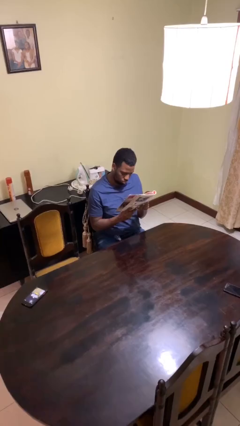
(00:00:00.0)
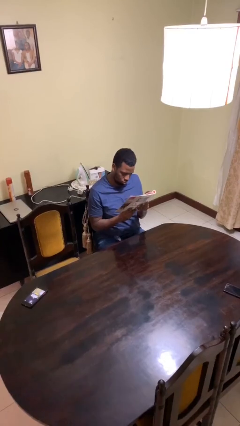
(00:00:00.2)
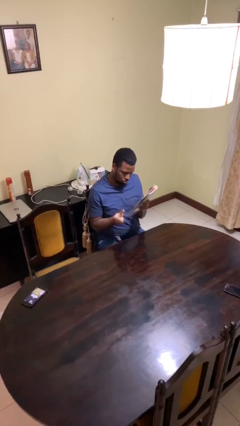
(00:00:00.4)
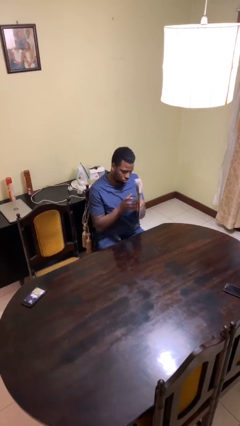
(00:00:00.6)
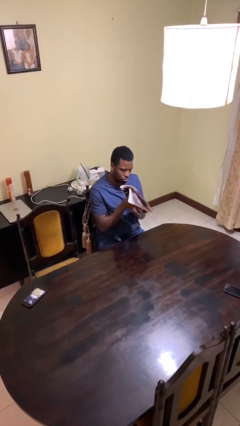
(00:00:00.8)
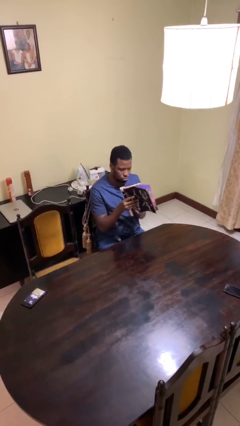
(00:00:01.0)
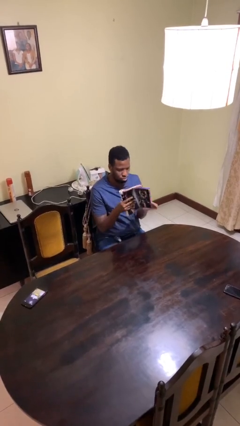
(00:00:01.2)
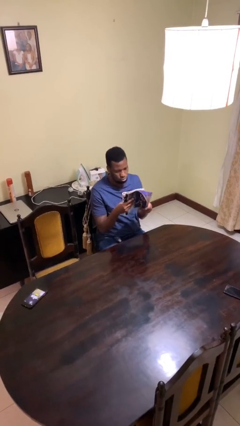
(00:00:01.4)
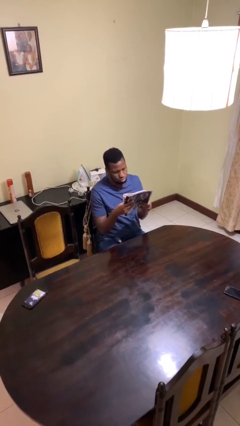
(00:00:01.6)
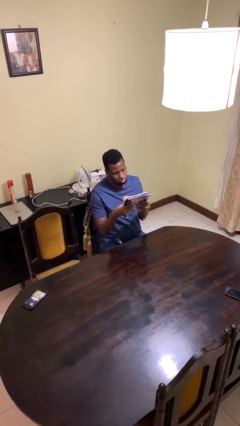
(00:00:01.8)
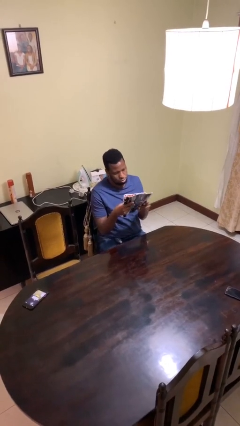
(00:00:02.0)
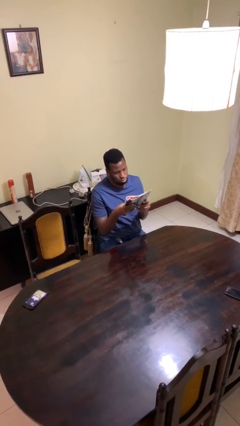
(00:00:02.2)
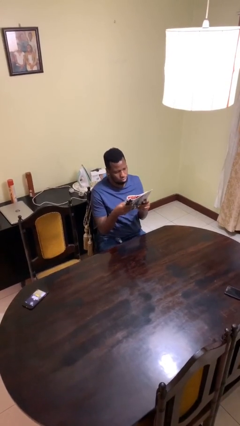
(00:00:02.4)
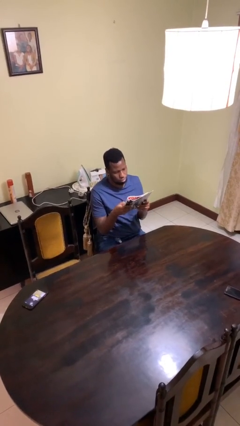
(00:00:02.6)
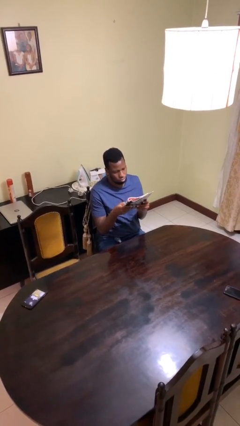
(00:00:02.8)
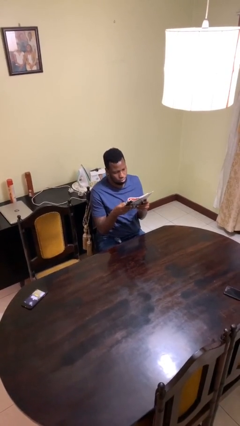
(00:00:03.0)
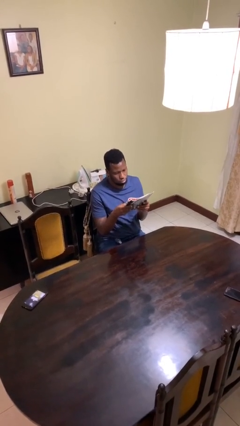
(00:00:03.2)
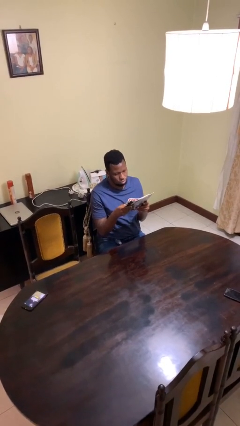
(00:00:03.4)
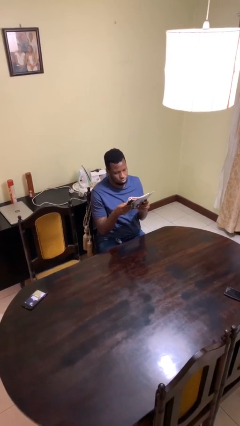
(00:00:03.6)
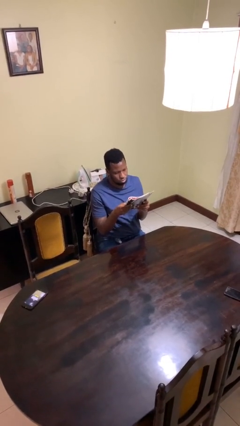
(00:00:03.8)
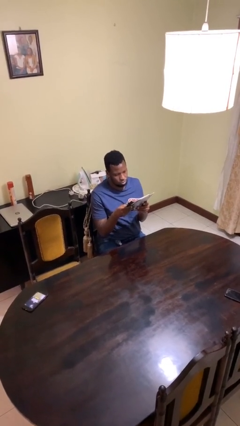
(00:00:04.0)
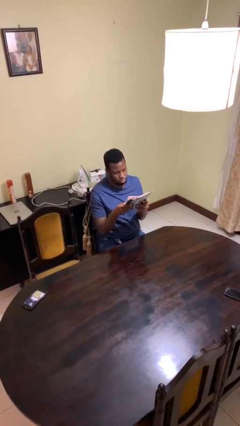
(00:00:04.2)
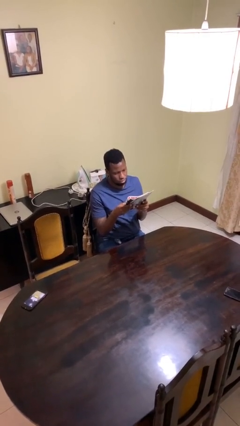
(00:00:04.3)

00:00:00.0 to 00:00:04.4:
person reads document

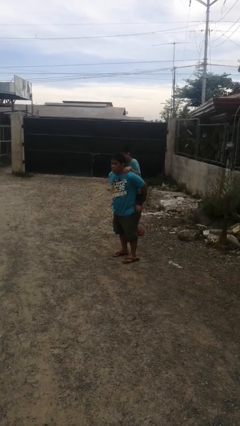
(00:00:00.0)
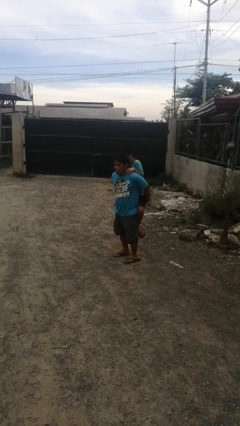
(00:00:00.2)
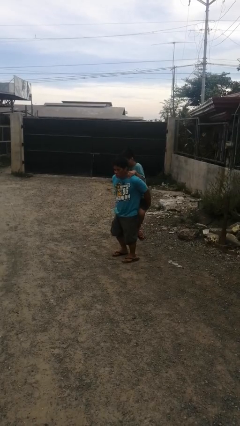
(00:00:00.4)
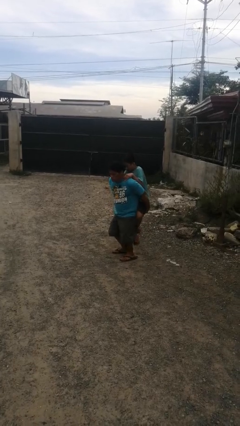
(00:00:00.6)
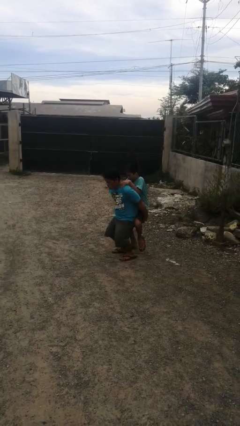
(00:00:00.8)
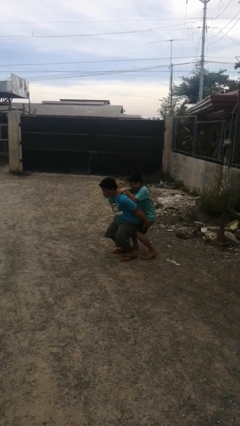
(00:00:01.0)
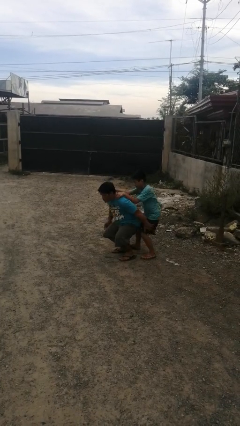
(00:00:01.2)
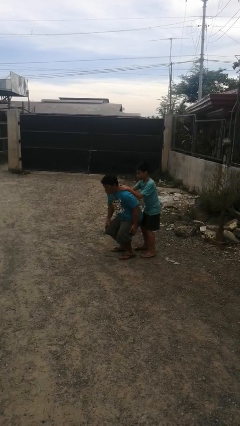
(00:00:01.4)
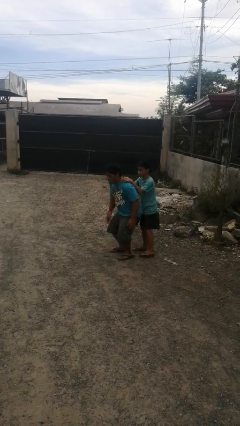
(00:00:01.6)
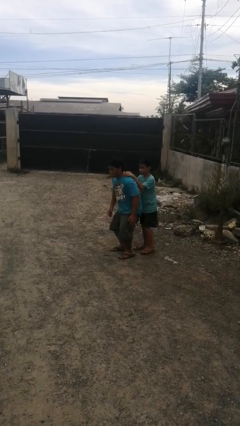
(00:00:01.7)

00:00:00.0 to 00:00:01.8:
person puts down person

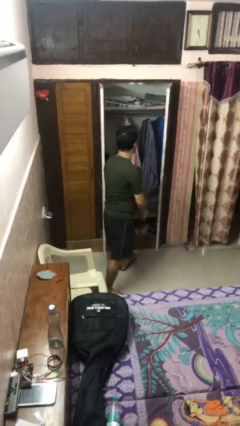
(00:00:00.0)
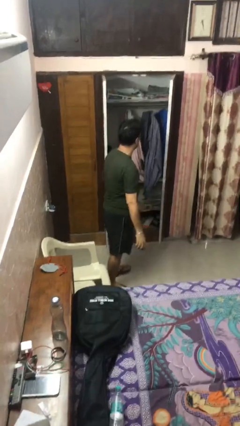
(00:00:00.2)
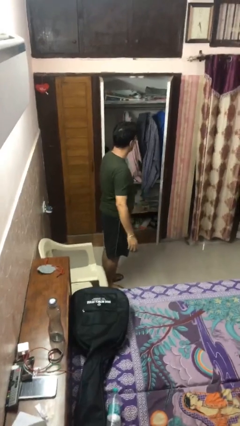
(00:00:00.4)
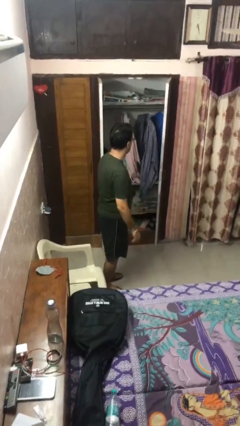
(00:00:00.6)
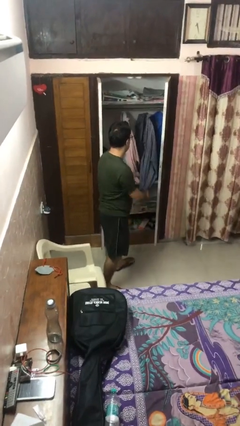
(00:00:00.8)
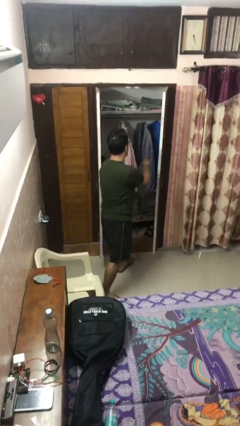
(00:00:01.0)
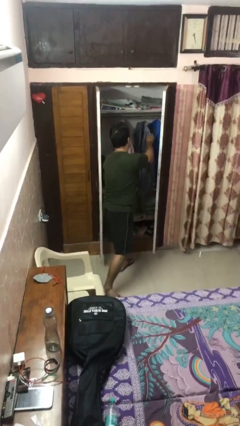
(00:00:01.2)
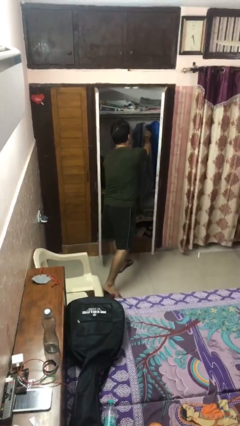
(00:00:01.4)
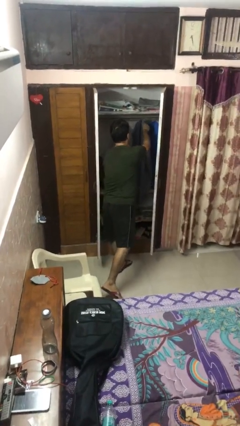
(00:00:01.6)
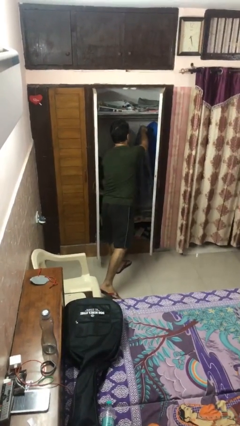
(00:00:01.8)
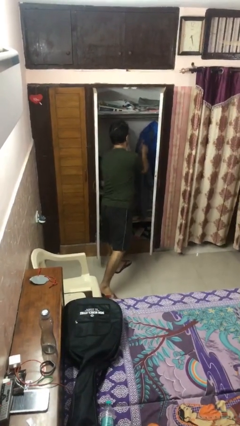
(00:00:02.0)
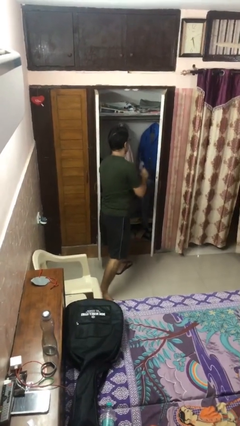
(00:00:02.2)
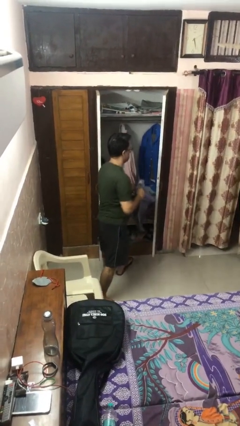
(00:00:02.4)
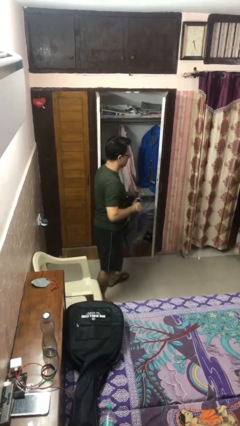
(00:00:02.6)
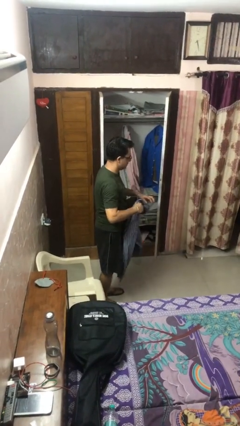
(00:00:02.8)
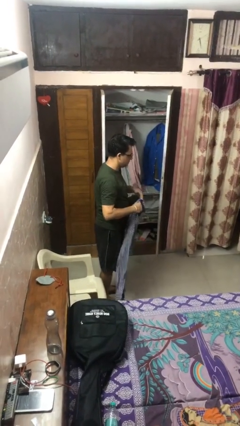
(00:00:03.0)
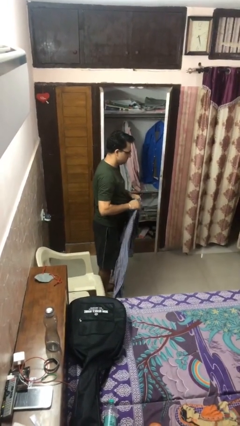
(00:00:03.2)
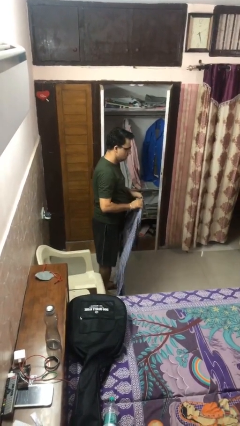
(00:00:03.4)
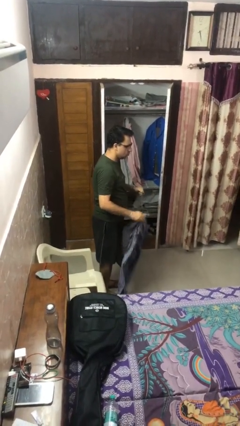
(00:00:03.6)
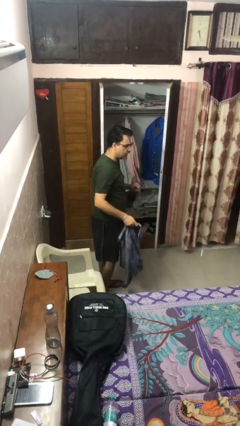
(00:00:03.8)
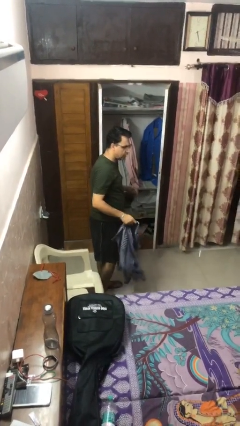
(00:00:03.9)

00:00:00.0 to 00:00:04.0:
person takes clothes from closet

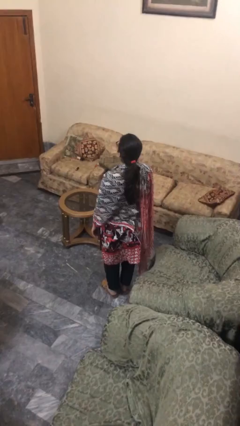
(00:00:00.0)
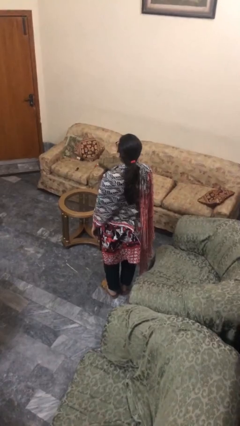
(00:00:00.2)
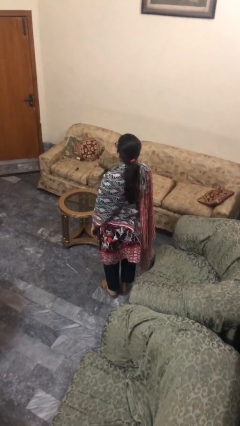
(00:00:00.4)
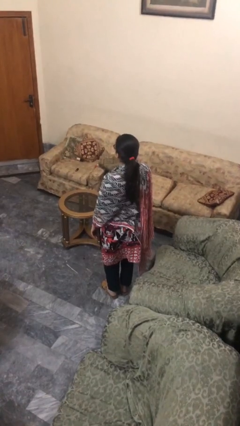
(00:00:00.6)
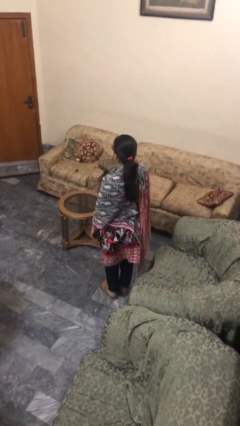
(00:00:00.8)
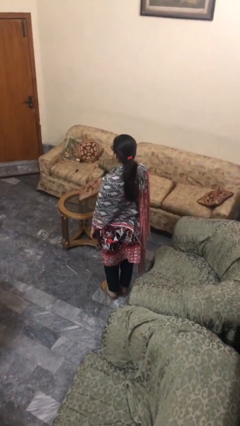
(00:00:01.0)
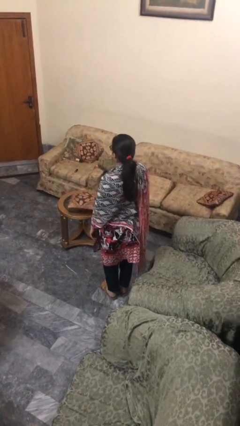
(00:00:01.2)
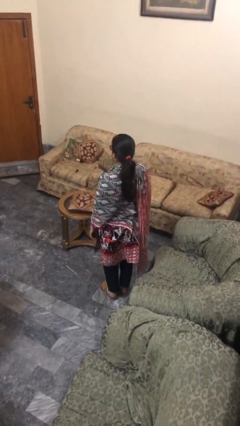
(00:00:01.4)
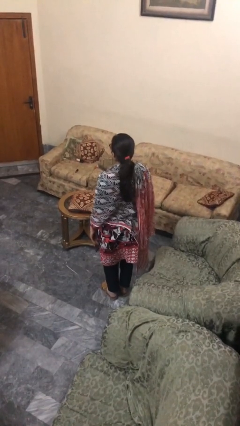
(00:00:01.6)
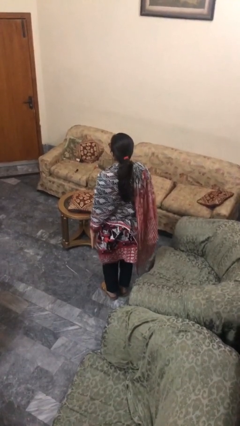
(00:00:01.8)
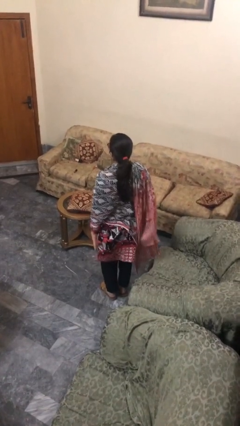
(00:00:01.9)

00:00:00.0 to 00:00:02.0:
person throws object on table

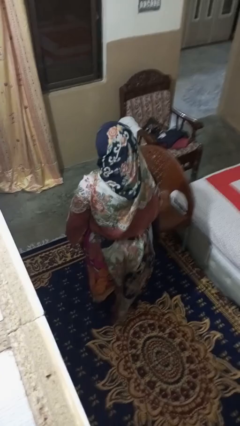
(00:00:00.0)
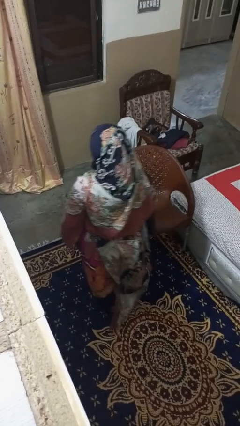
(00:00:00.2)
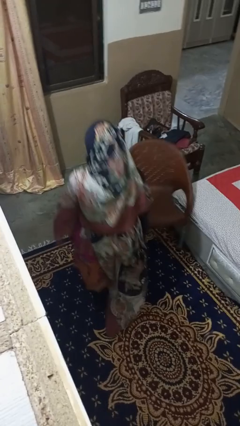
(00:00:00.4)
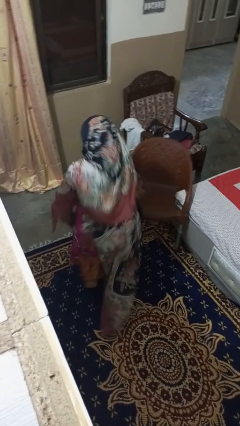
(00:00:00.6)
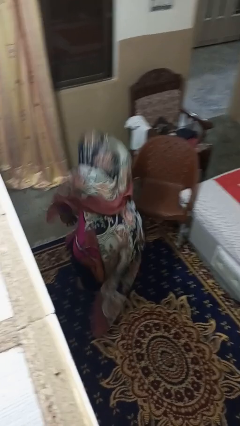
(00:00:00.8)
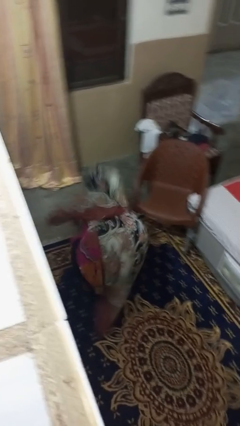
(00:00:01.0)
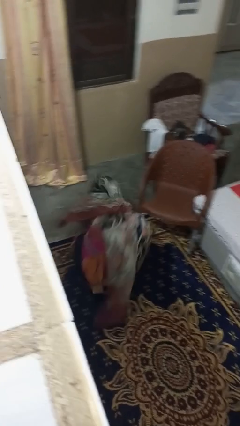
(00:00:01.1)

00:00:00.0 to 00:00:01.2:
person trips on object on floor

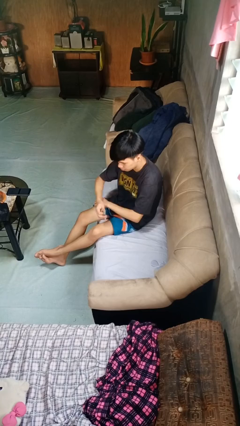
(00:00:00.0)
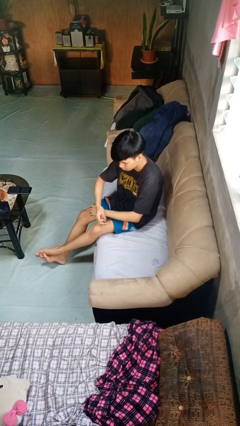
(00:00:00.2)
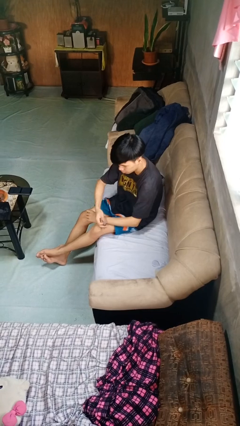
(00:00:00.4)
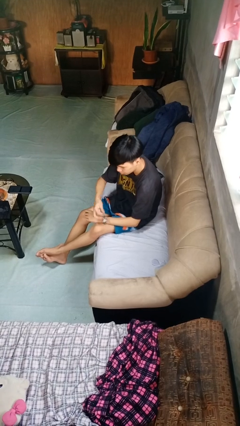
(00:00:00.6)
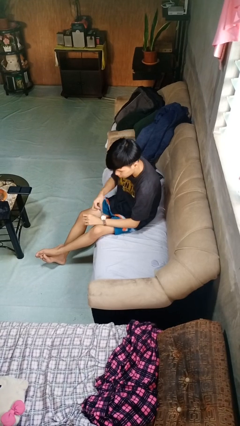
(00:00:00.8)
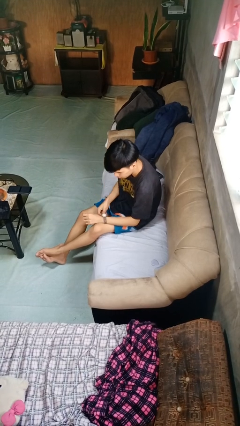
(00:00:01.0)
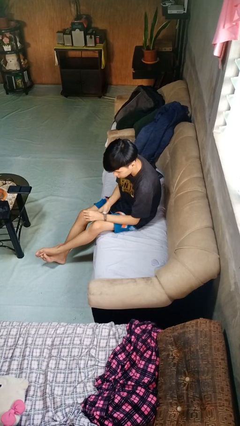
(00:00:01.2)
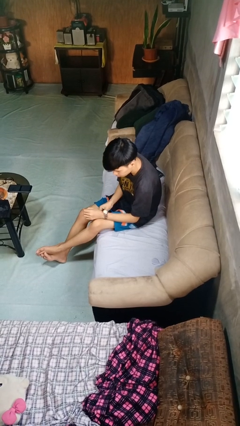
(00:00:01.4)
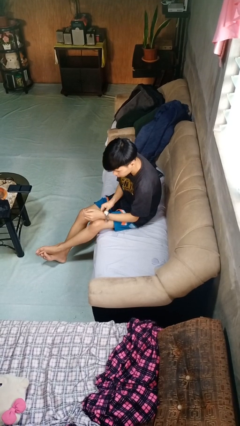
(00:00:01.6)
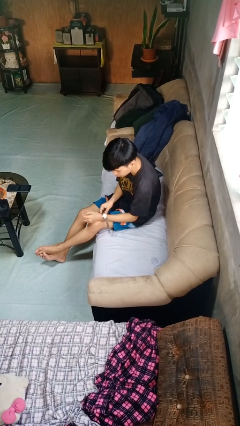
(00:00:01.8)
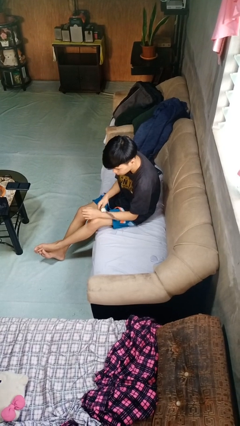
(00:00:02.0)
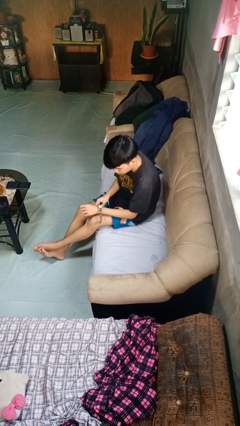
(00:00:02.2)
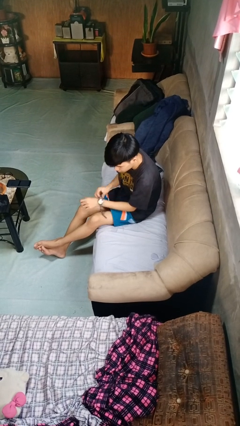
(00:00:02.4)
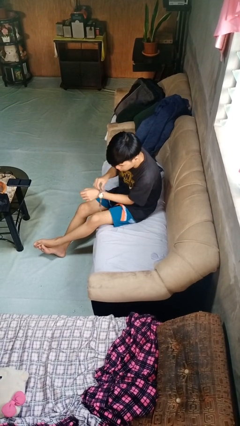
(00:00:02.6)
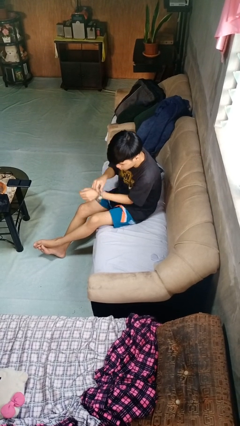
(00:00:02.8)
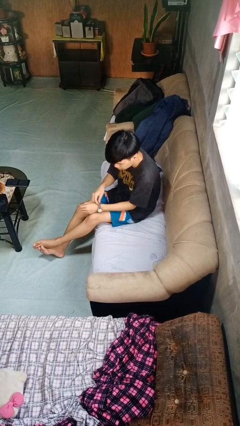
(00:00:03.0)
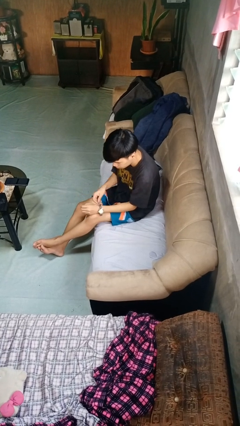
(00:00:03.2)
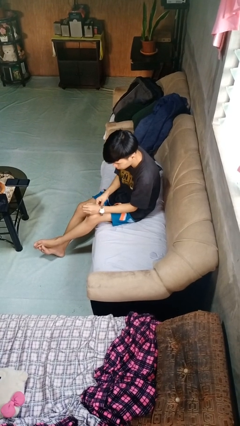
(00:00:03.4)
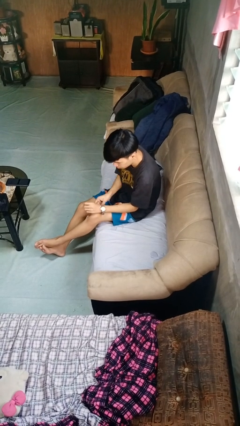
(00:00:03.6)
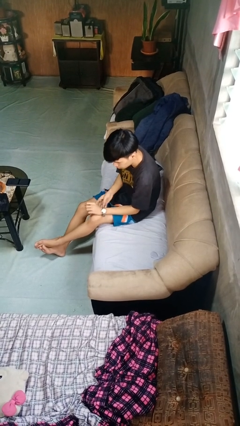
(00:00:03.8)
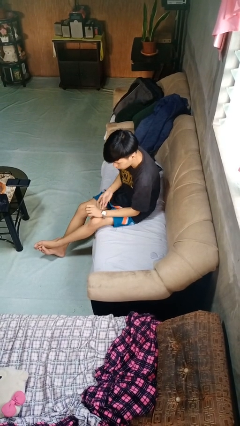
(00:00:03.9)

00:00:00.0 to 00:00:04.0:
person puts on wristwatch
